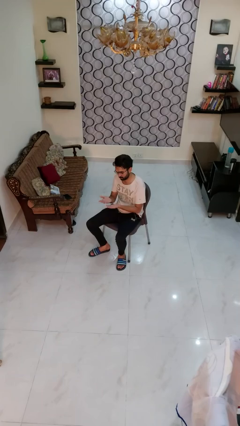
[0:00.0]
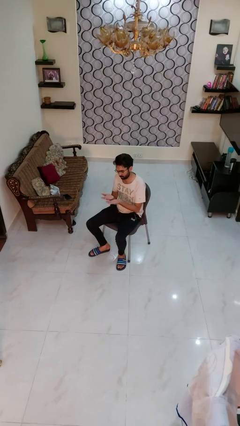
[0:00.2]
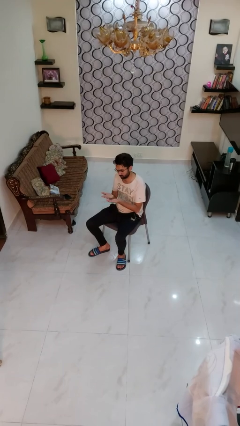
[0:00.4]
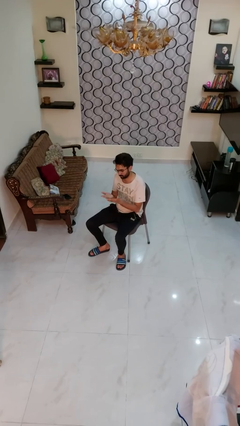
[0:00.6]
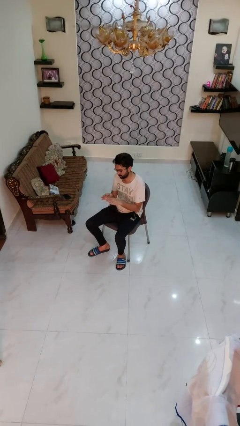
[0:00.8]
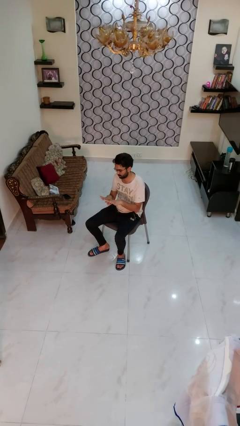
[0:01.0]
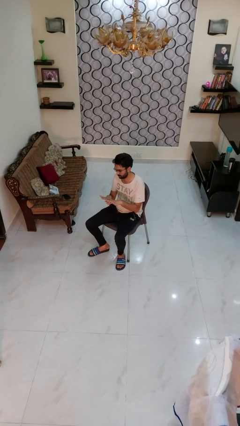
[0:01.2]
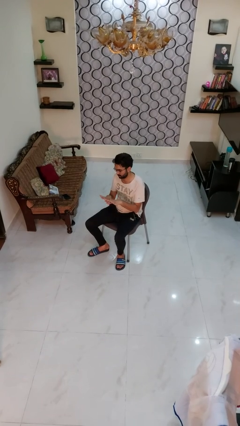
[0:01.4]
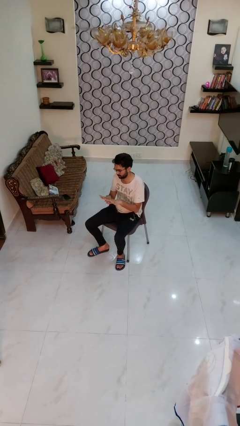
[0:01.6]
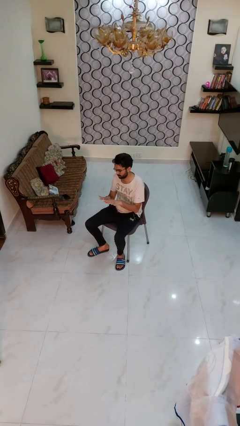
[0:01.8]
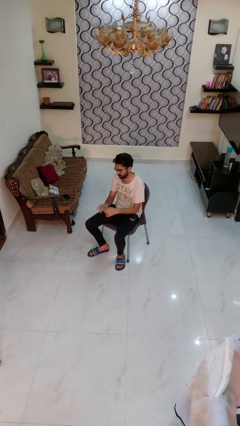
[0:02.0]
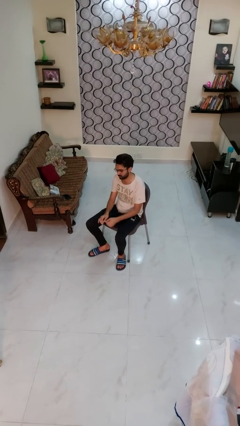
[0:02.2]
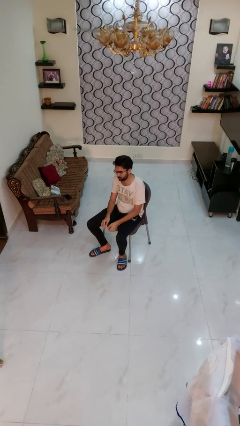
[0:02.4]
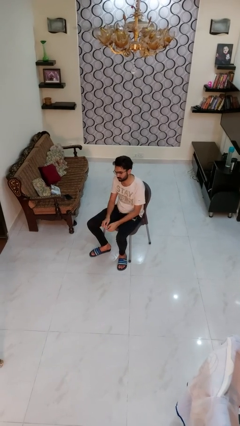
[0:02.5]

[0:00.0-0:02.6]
person looks at hands in lap

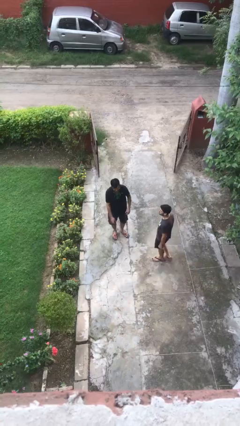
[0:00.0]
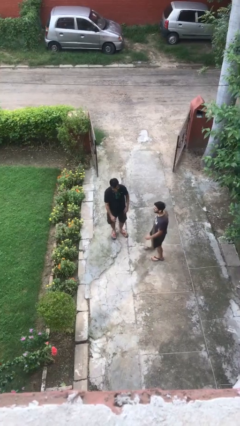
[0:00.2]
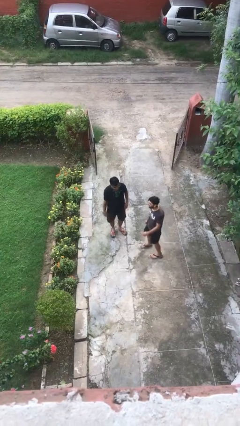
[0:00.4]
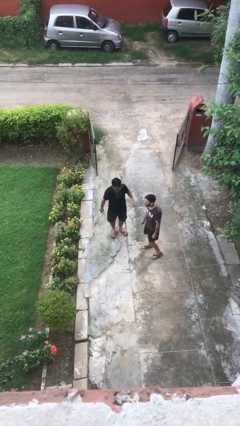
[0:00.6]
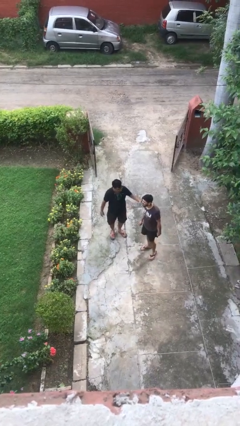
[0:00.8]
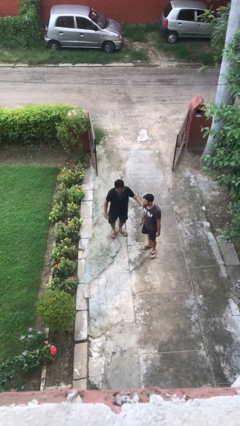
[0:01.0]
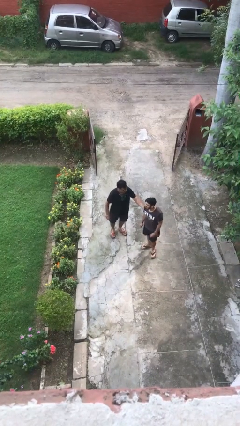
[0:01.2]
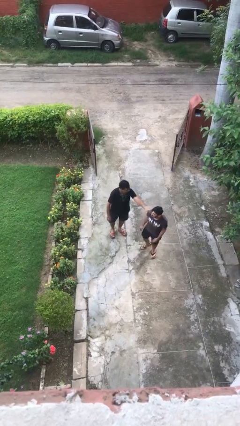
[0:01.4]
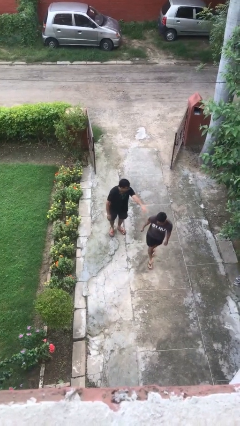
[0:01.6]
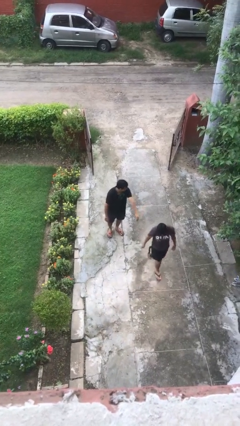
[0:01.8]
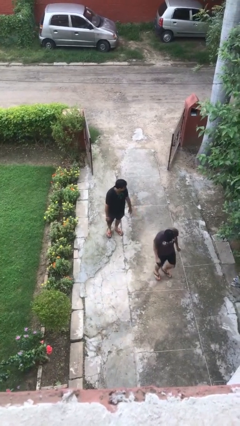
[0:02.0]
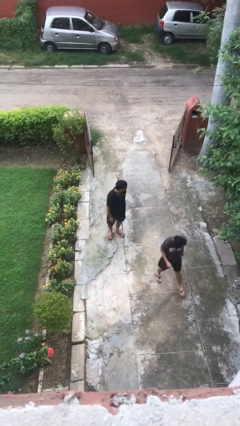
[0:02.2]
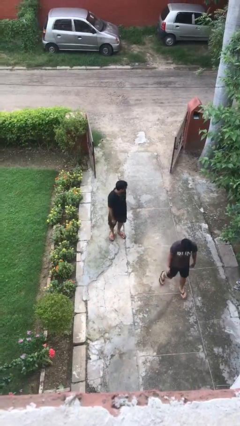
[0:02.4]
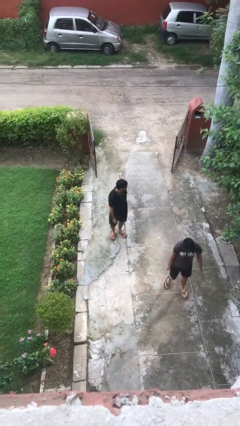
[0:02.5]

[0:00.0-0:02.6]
person shoves person

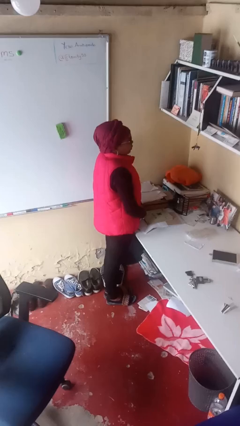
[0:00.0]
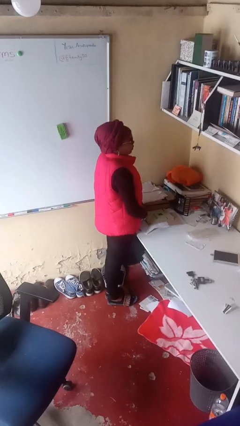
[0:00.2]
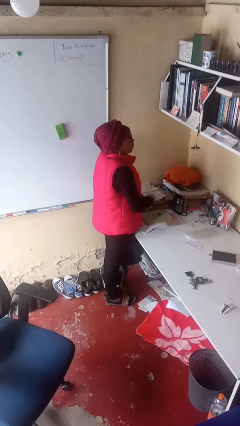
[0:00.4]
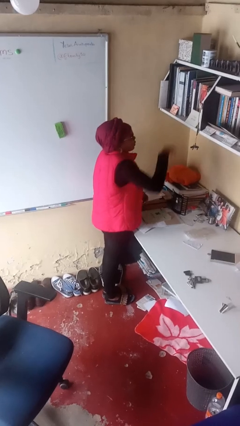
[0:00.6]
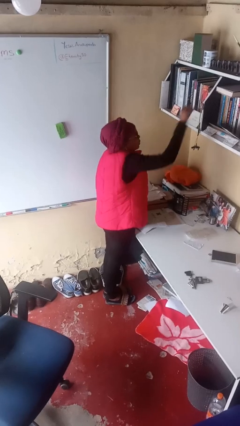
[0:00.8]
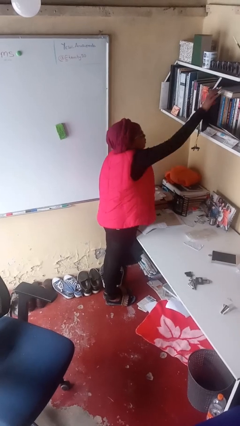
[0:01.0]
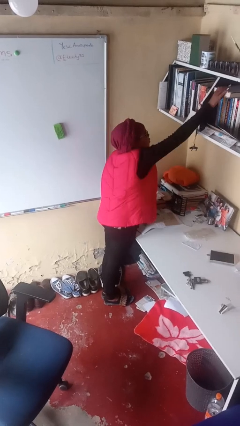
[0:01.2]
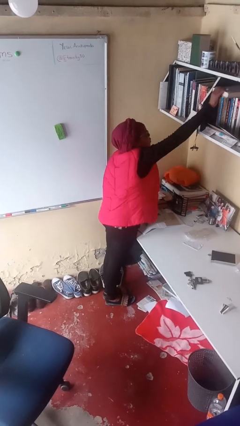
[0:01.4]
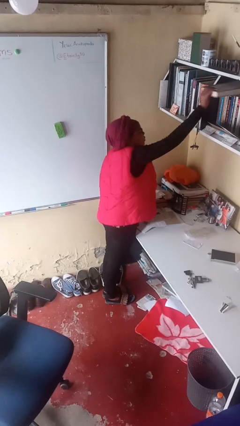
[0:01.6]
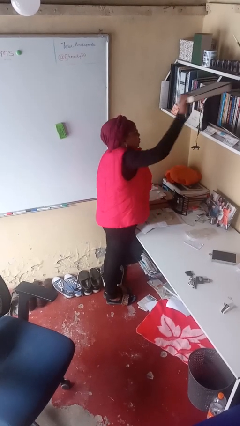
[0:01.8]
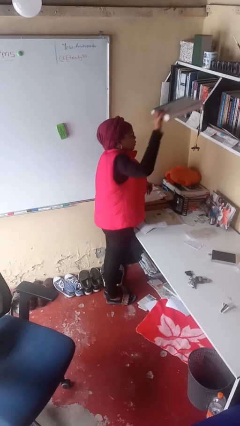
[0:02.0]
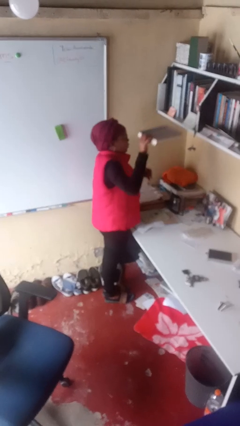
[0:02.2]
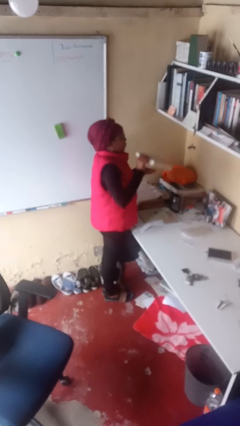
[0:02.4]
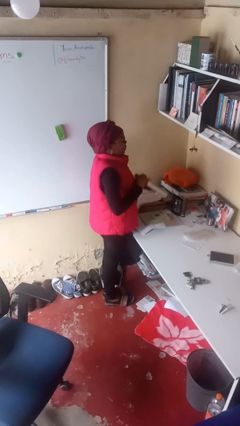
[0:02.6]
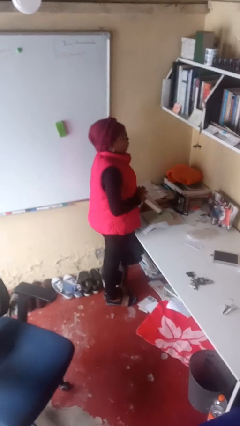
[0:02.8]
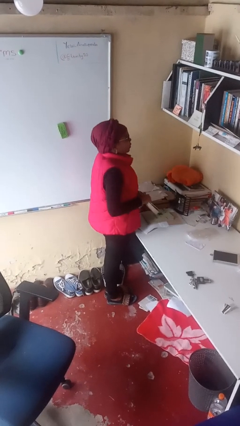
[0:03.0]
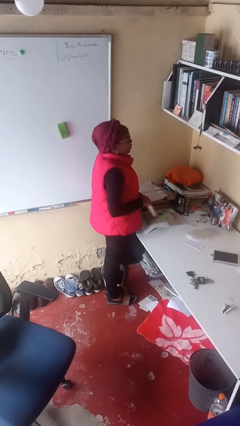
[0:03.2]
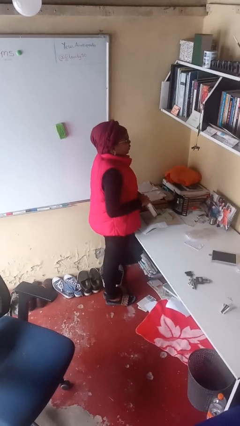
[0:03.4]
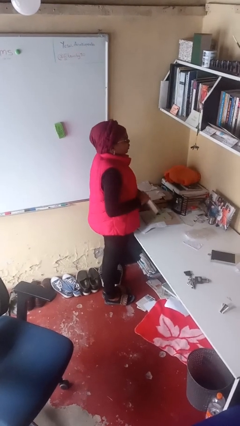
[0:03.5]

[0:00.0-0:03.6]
person picks up object from shelf

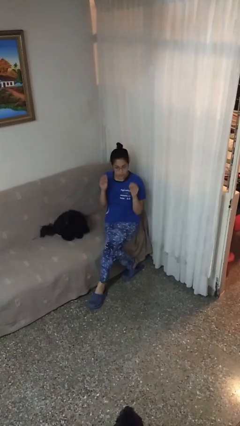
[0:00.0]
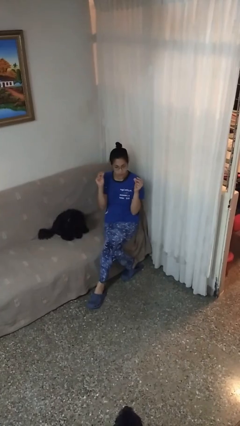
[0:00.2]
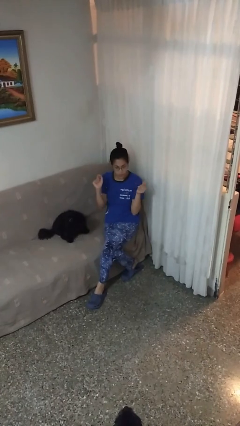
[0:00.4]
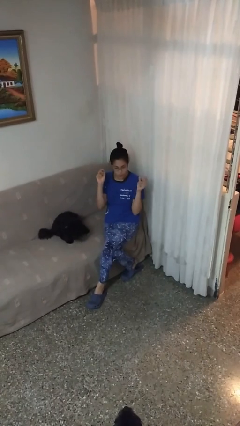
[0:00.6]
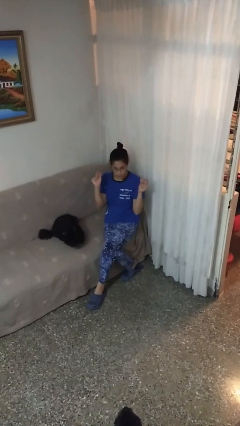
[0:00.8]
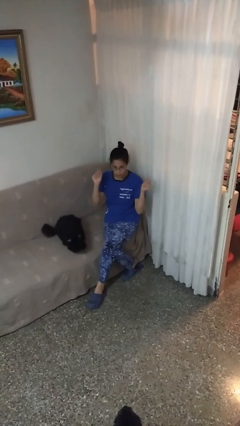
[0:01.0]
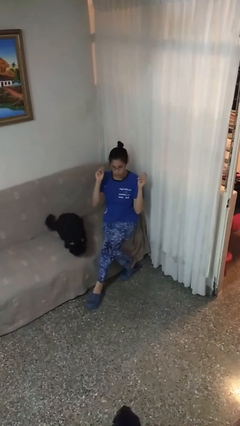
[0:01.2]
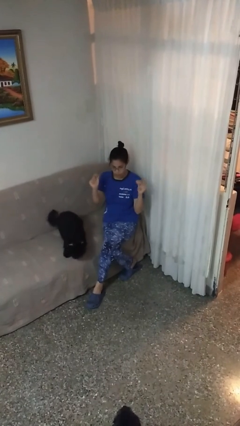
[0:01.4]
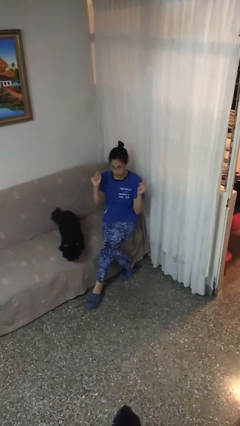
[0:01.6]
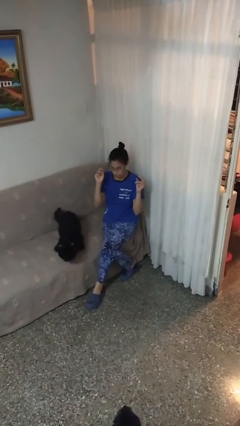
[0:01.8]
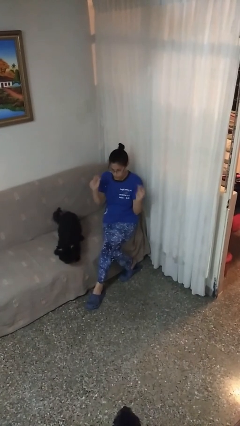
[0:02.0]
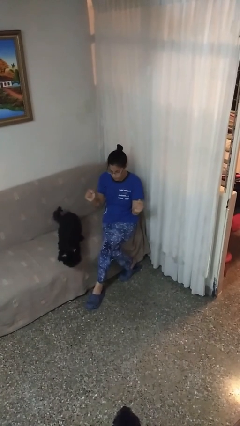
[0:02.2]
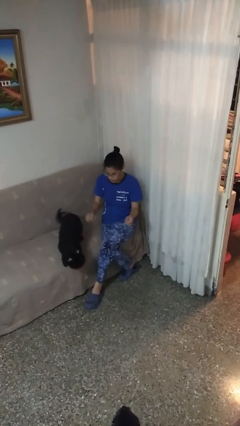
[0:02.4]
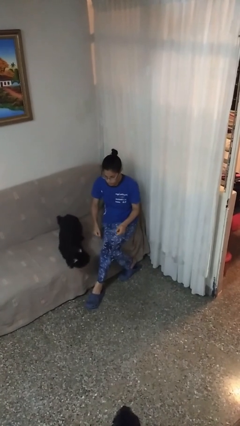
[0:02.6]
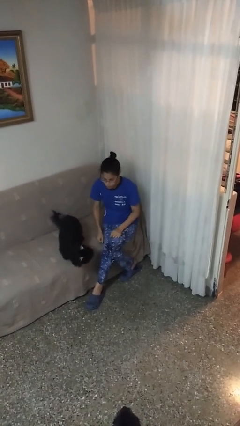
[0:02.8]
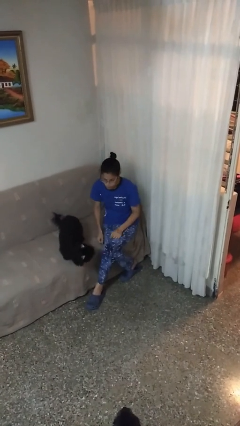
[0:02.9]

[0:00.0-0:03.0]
person snaps fingers

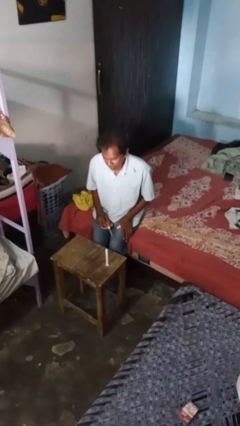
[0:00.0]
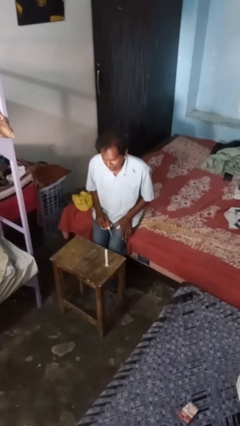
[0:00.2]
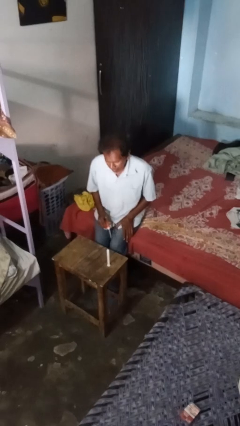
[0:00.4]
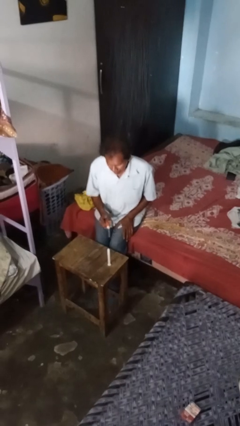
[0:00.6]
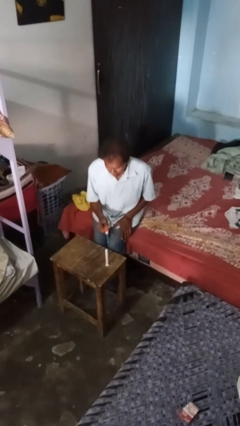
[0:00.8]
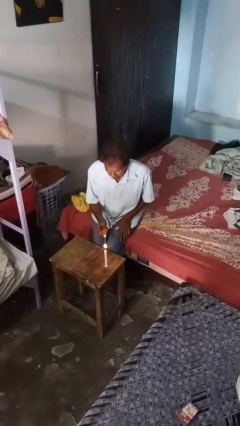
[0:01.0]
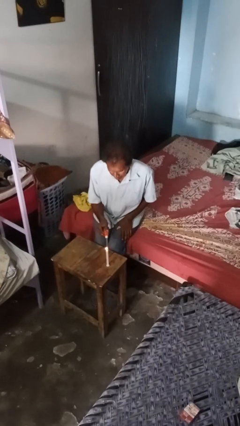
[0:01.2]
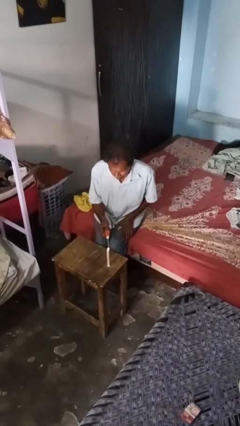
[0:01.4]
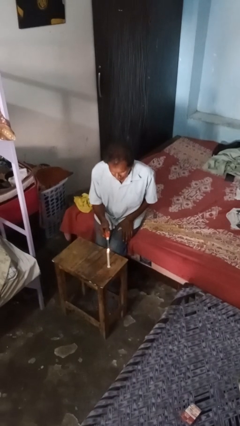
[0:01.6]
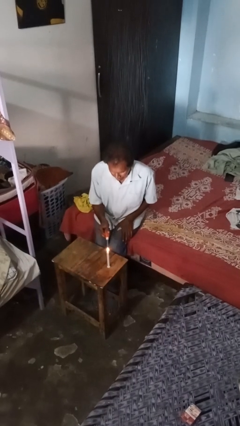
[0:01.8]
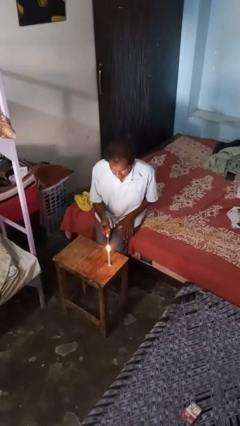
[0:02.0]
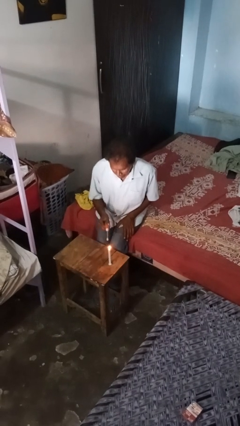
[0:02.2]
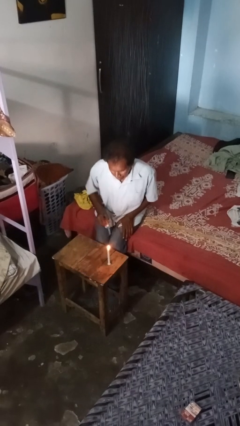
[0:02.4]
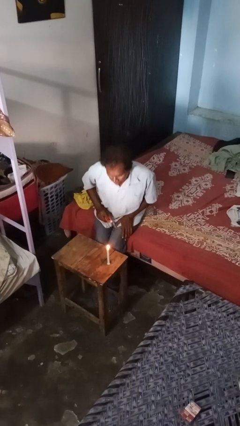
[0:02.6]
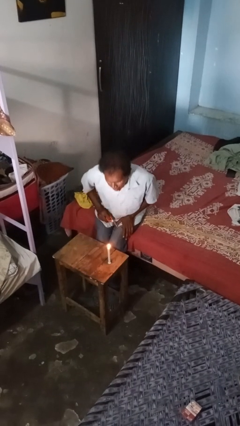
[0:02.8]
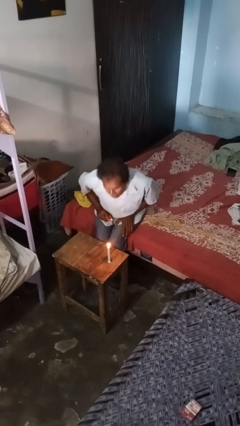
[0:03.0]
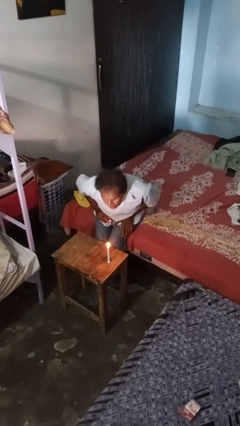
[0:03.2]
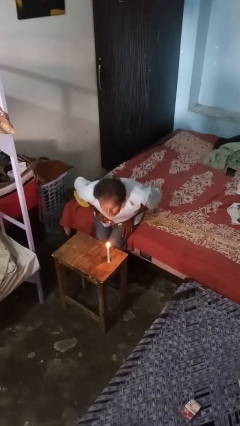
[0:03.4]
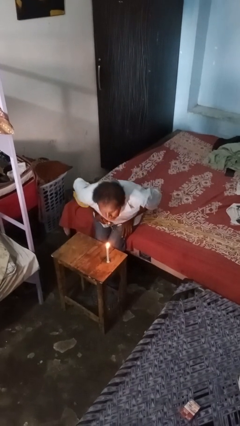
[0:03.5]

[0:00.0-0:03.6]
person lights candle

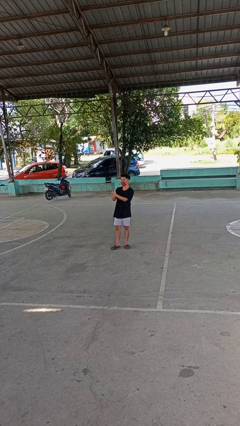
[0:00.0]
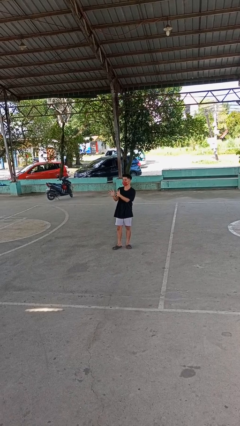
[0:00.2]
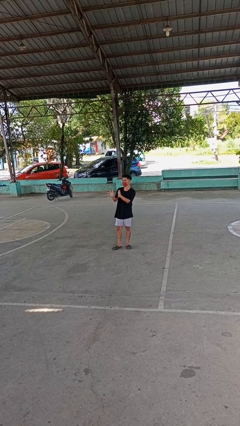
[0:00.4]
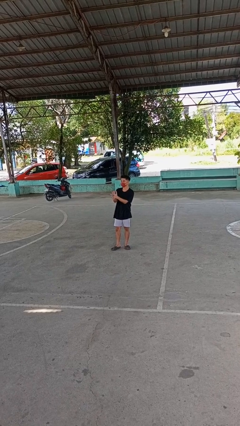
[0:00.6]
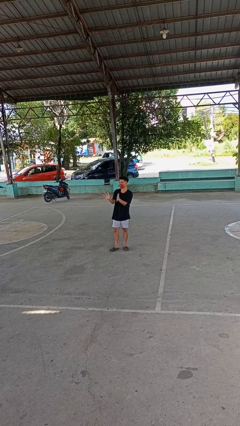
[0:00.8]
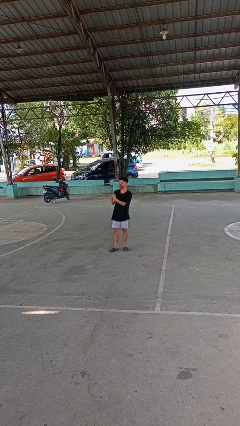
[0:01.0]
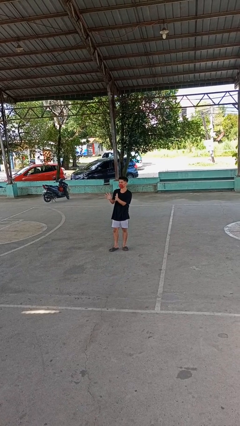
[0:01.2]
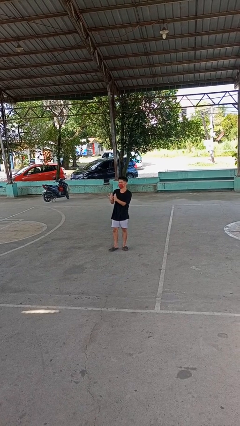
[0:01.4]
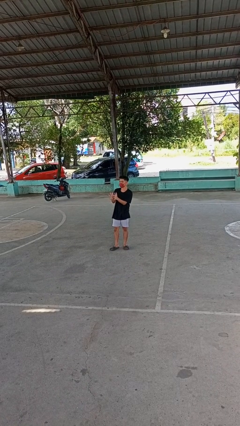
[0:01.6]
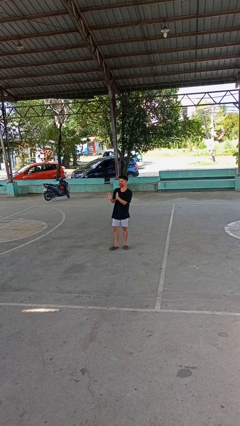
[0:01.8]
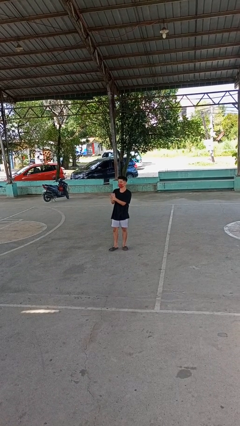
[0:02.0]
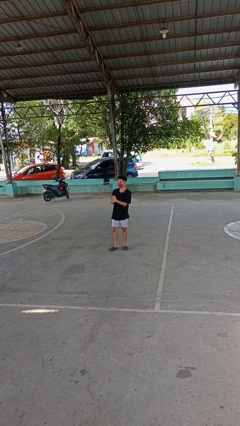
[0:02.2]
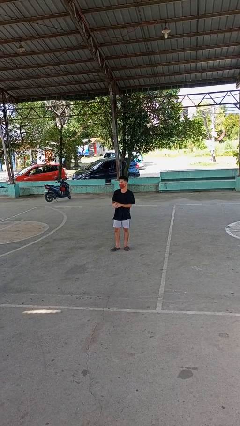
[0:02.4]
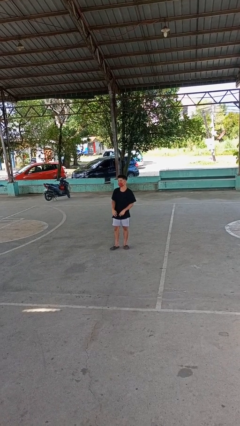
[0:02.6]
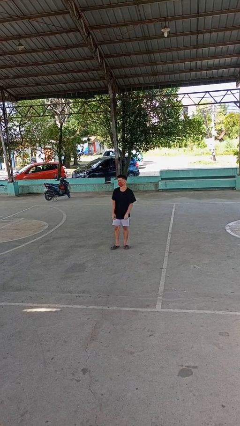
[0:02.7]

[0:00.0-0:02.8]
person claps hands
